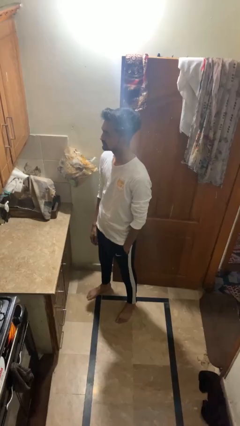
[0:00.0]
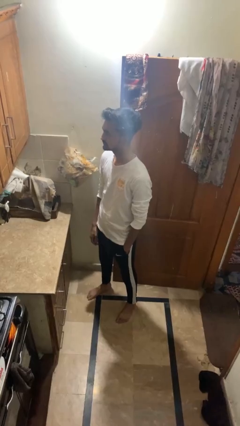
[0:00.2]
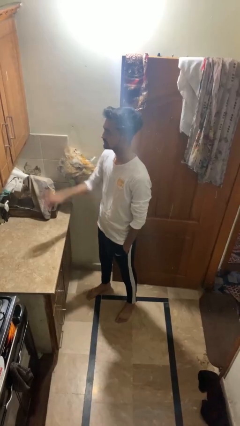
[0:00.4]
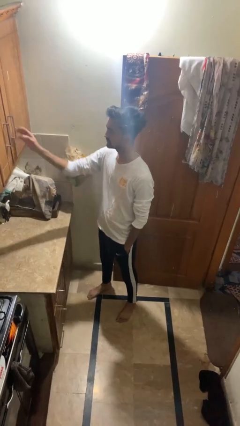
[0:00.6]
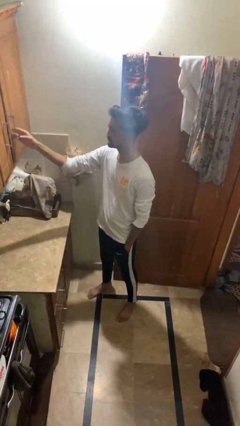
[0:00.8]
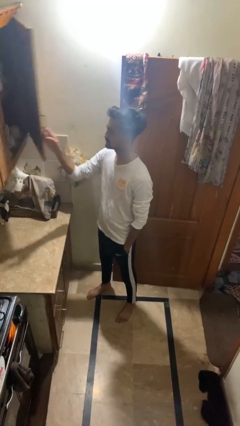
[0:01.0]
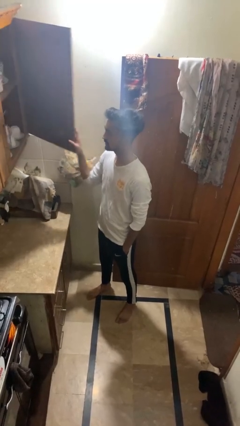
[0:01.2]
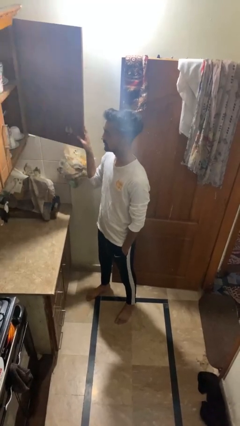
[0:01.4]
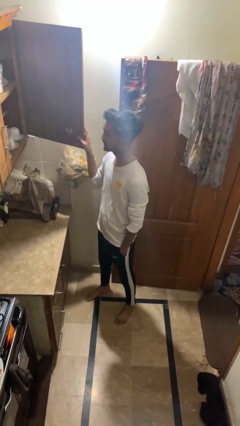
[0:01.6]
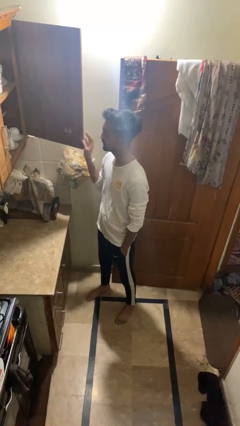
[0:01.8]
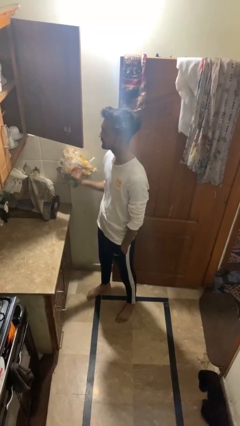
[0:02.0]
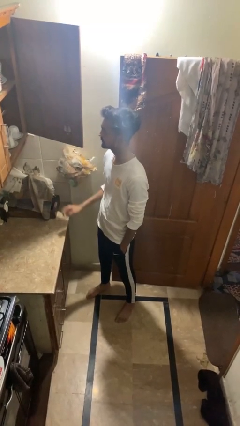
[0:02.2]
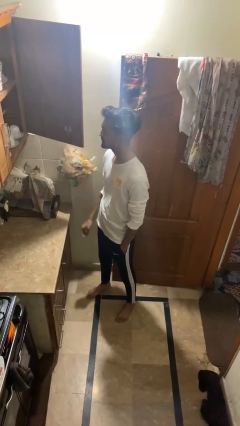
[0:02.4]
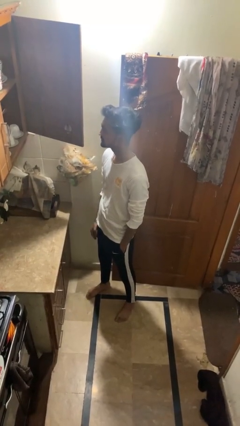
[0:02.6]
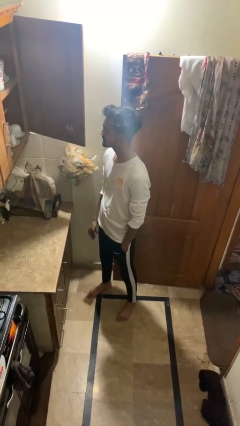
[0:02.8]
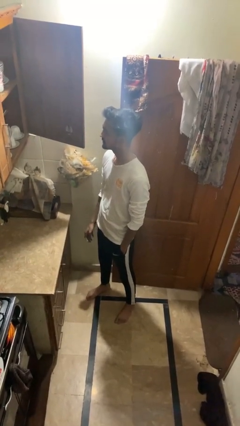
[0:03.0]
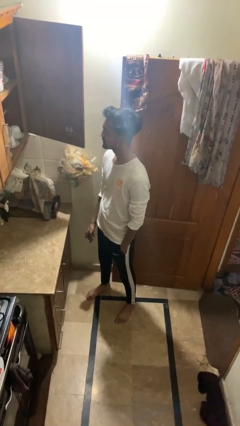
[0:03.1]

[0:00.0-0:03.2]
person opens cabinet

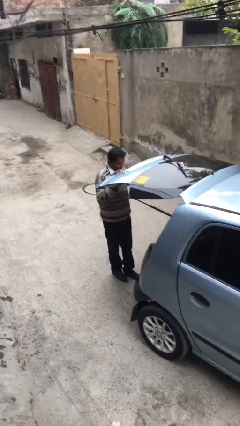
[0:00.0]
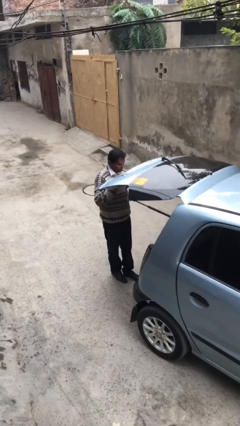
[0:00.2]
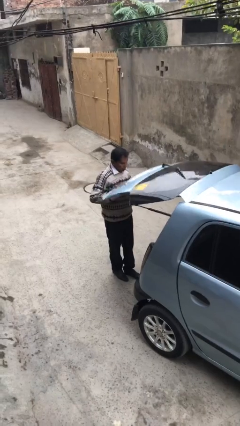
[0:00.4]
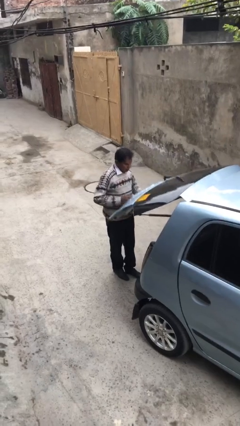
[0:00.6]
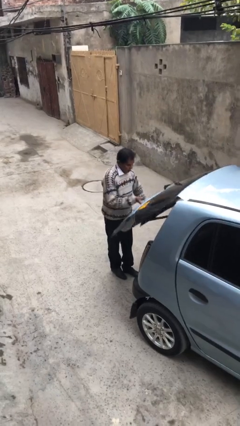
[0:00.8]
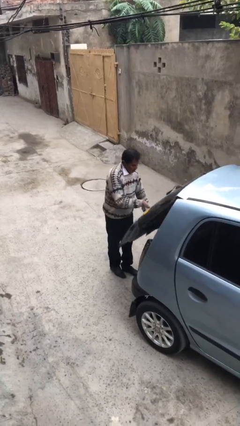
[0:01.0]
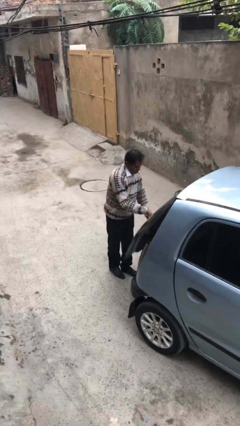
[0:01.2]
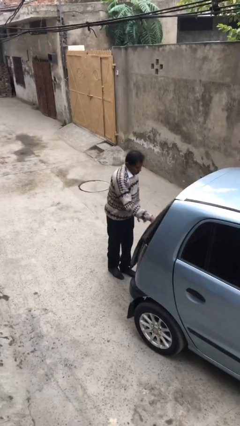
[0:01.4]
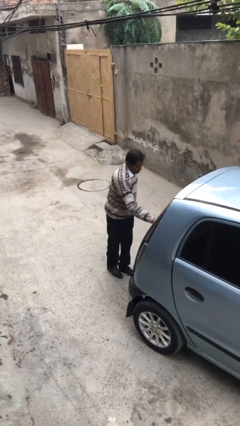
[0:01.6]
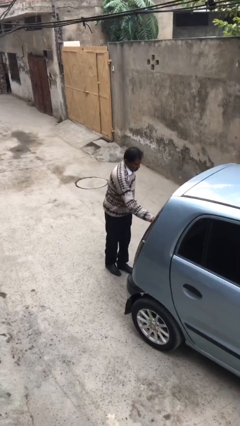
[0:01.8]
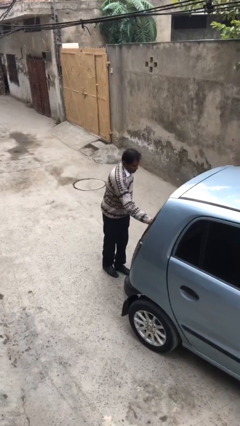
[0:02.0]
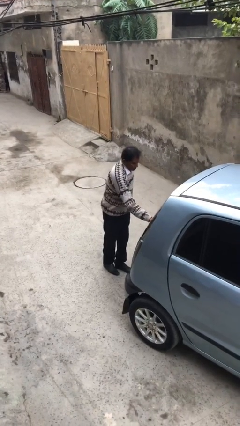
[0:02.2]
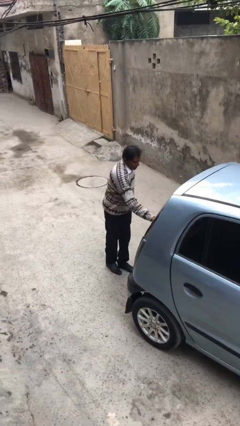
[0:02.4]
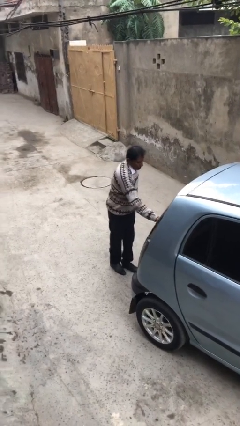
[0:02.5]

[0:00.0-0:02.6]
person closes car trunk

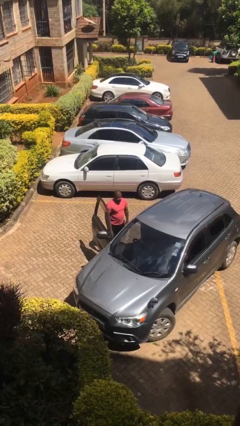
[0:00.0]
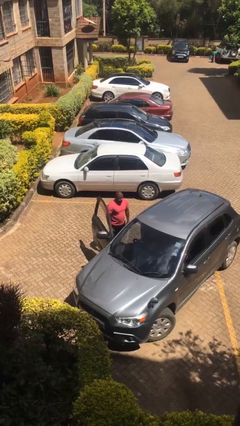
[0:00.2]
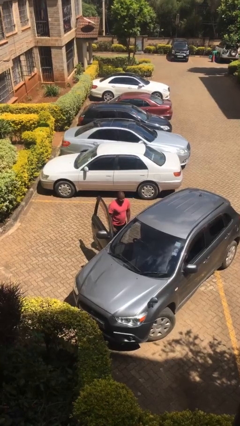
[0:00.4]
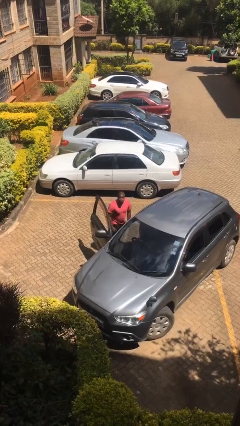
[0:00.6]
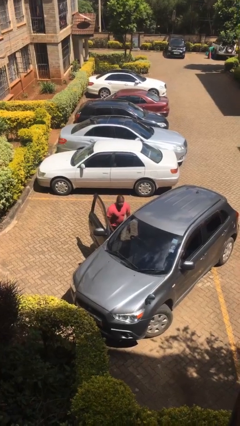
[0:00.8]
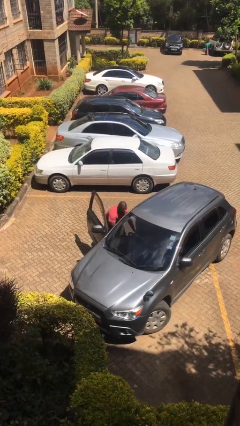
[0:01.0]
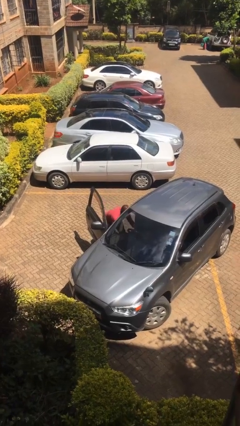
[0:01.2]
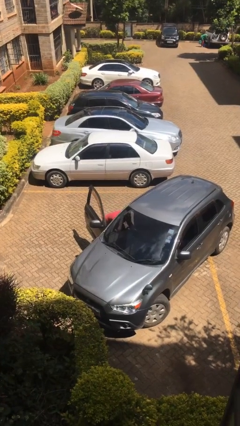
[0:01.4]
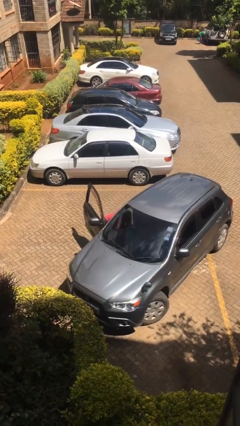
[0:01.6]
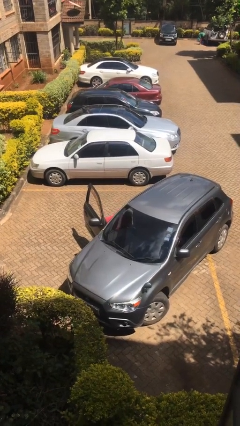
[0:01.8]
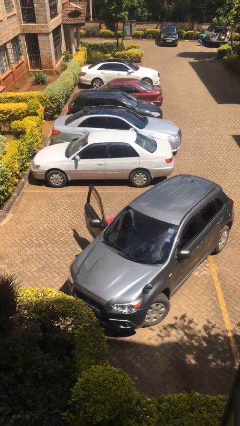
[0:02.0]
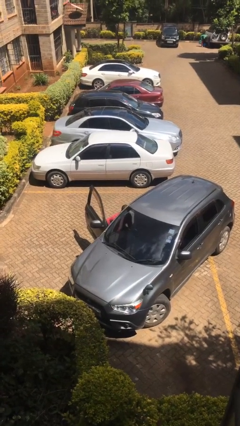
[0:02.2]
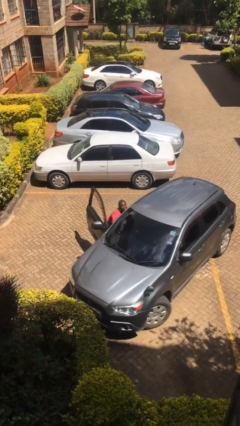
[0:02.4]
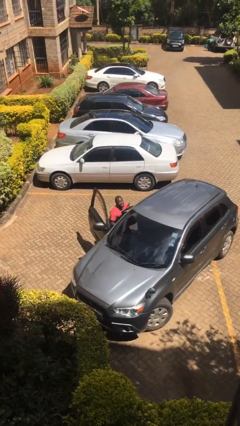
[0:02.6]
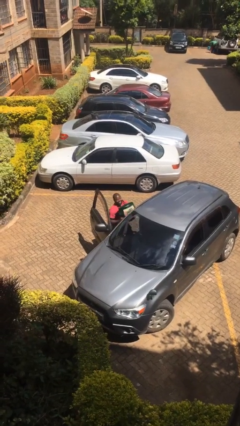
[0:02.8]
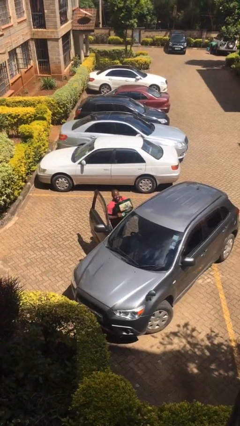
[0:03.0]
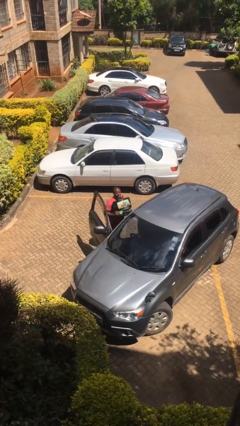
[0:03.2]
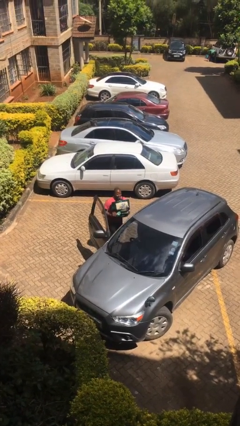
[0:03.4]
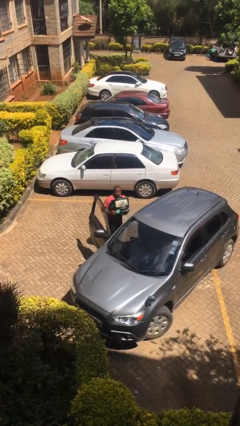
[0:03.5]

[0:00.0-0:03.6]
person unloads car

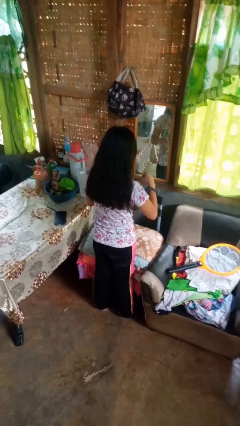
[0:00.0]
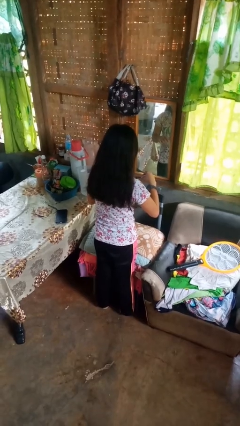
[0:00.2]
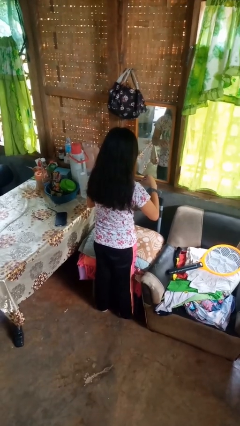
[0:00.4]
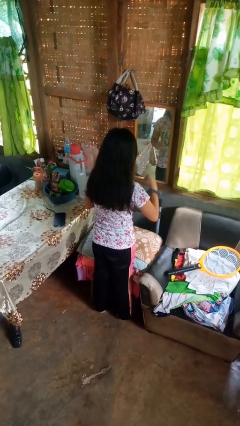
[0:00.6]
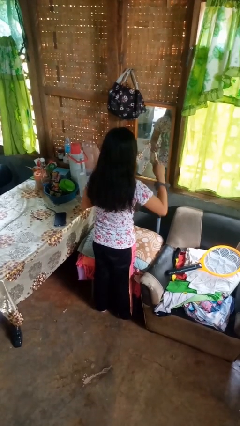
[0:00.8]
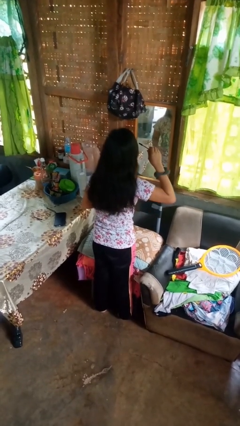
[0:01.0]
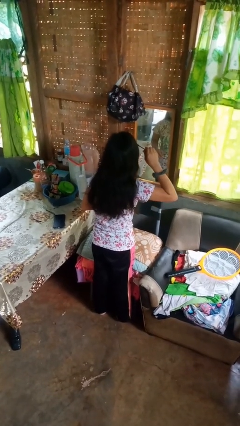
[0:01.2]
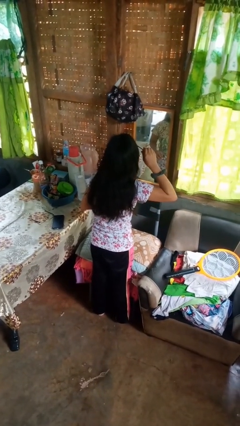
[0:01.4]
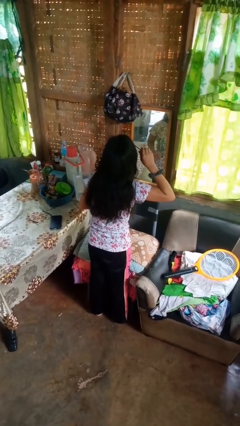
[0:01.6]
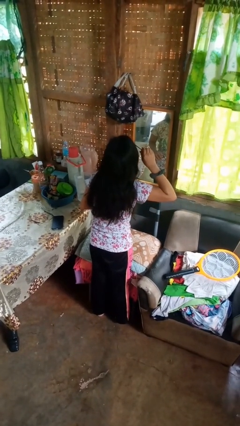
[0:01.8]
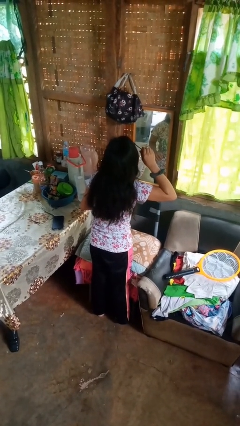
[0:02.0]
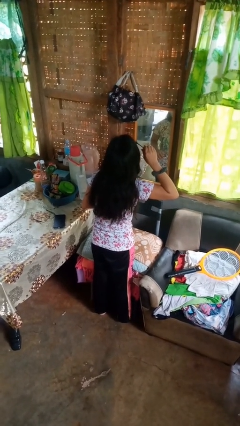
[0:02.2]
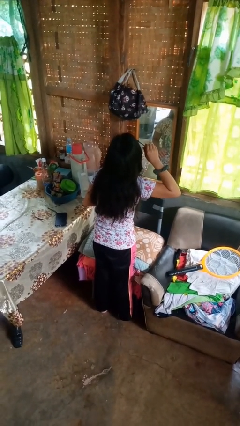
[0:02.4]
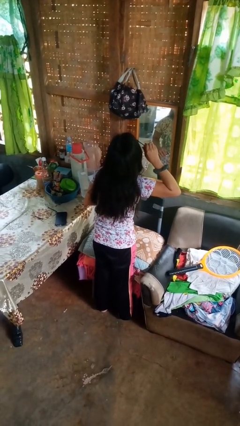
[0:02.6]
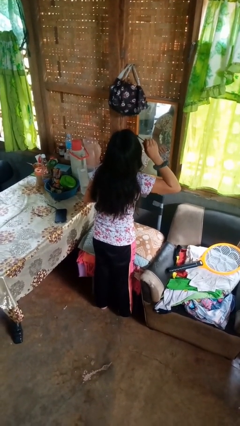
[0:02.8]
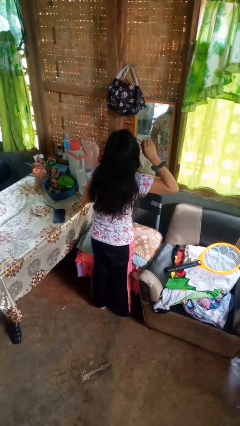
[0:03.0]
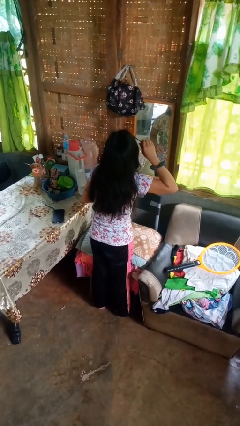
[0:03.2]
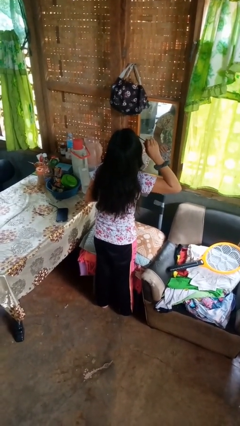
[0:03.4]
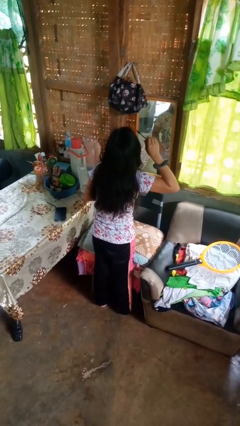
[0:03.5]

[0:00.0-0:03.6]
person applies eye makeup

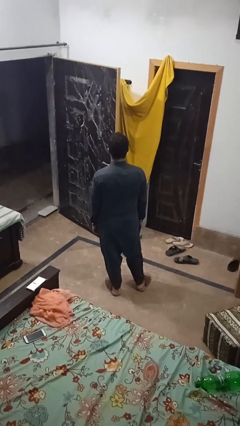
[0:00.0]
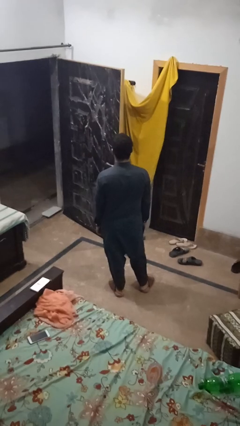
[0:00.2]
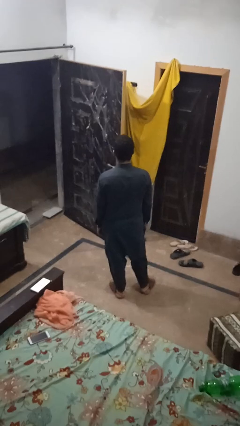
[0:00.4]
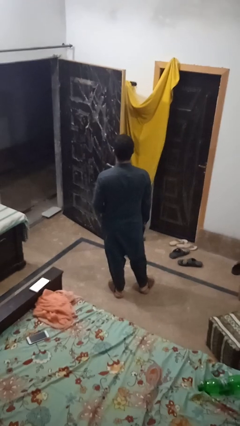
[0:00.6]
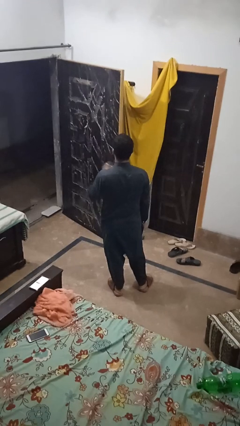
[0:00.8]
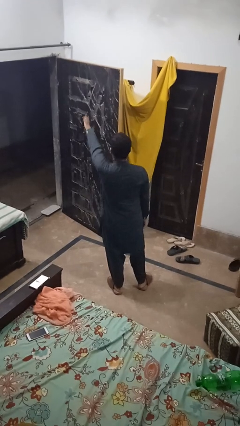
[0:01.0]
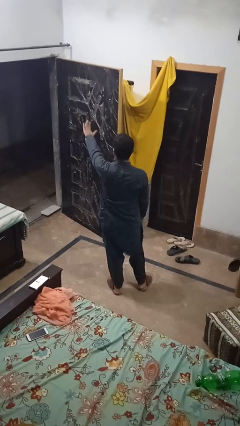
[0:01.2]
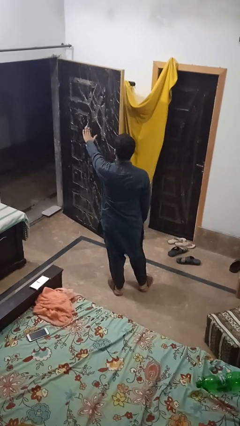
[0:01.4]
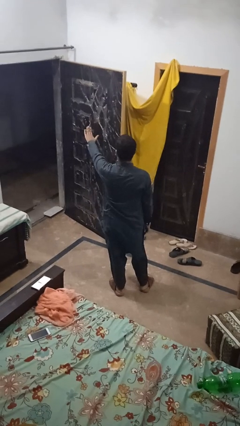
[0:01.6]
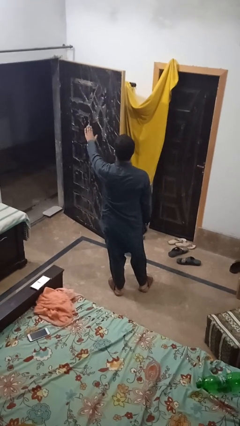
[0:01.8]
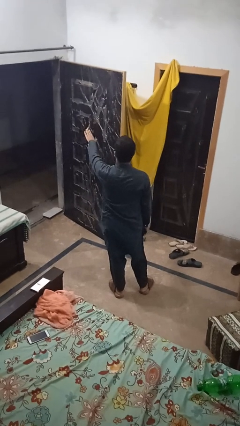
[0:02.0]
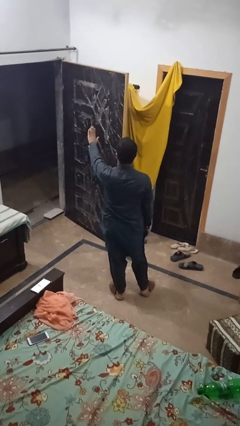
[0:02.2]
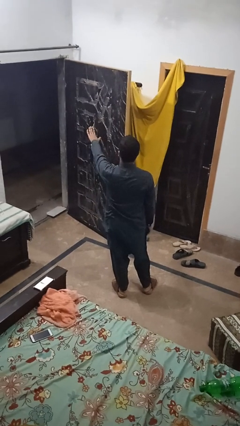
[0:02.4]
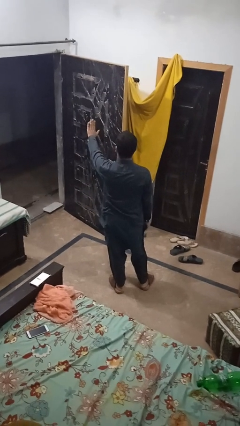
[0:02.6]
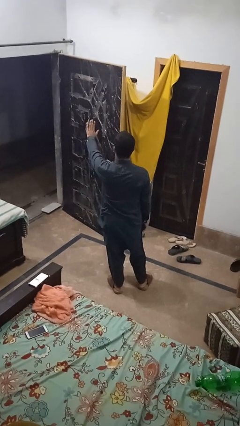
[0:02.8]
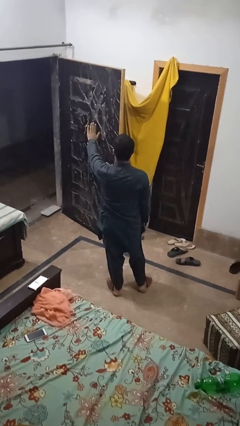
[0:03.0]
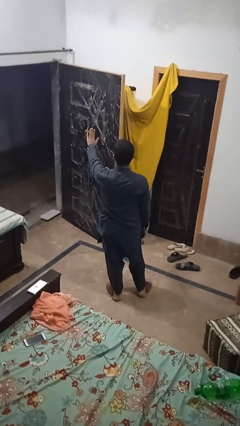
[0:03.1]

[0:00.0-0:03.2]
person gestures stop

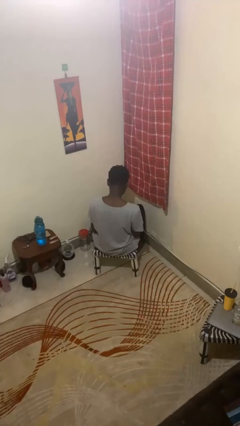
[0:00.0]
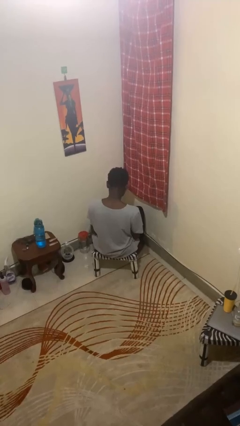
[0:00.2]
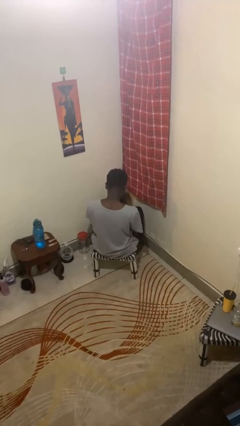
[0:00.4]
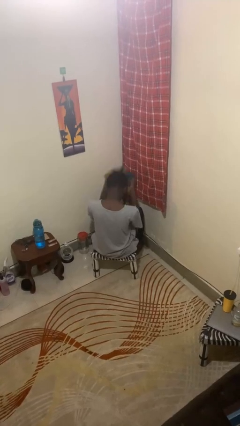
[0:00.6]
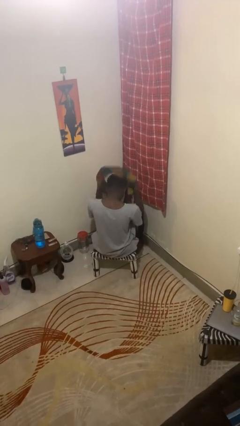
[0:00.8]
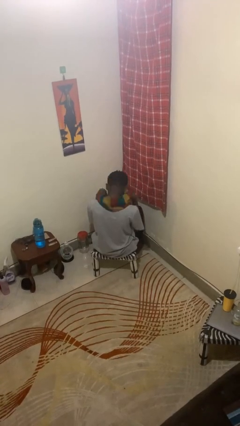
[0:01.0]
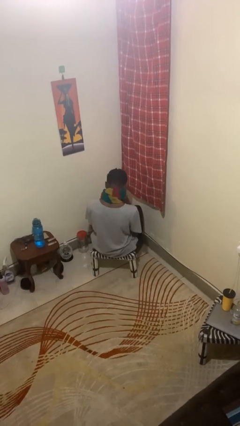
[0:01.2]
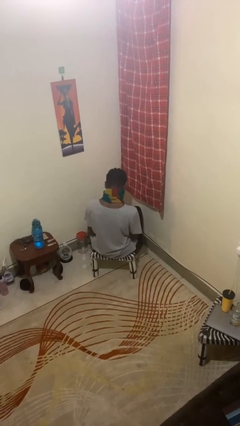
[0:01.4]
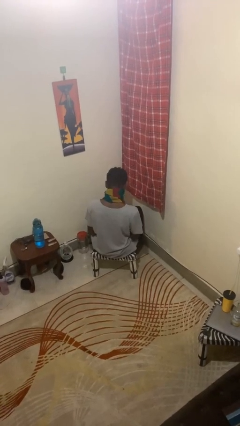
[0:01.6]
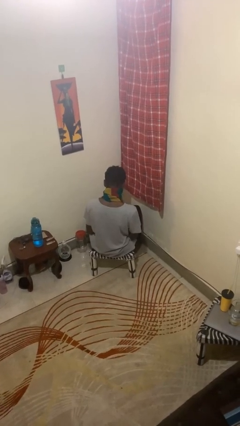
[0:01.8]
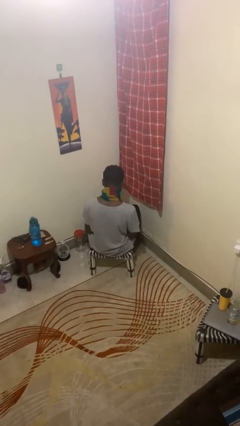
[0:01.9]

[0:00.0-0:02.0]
person puts on scarf
